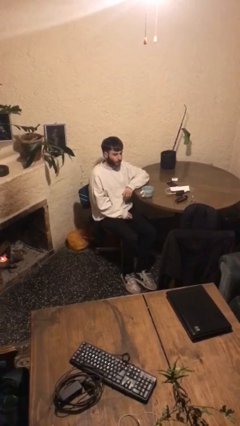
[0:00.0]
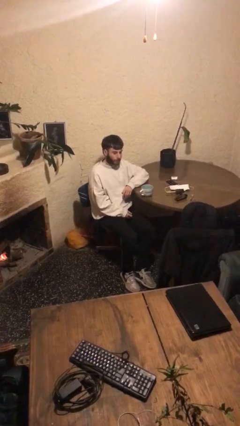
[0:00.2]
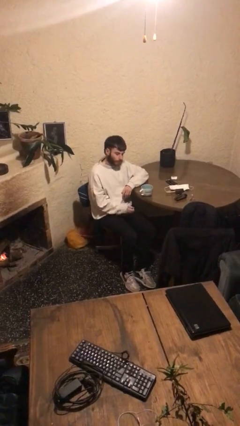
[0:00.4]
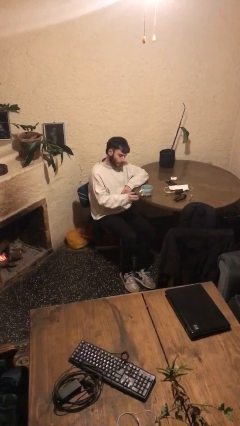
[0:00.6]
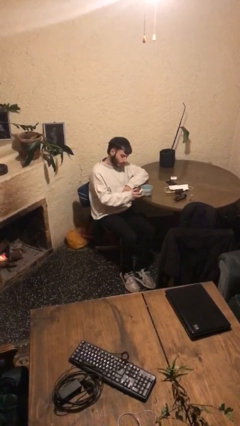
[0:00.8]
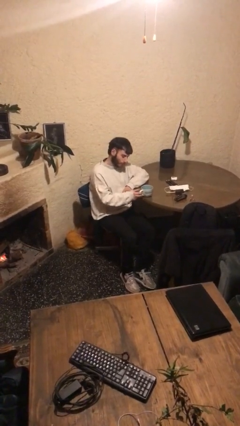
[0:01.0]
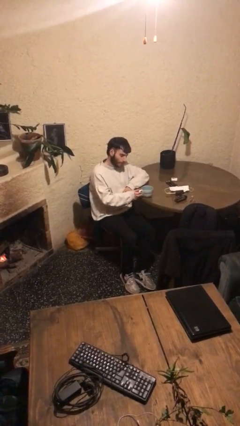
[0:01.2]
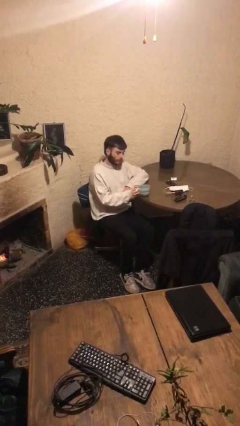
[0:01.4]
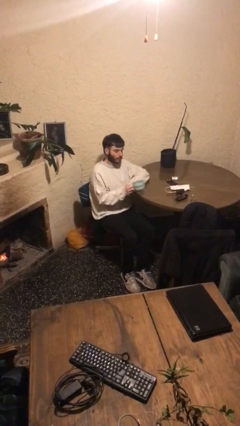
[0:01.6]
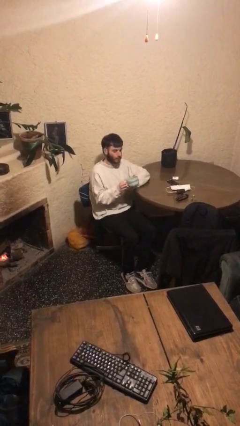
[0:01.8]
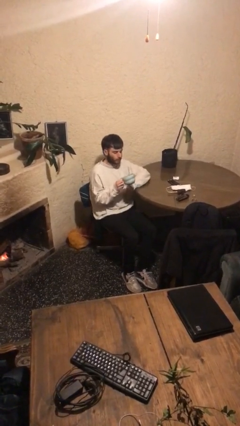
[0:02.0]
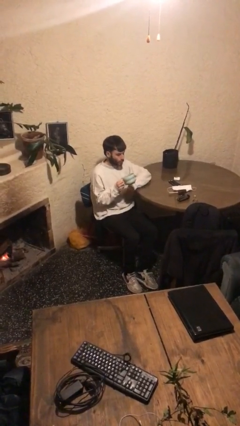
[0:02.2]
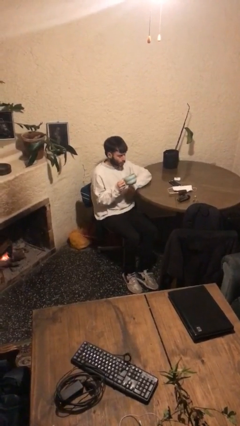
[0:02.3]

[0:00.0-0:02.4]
person picks up object from table

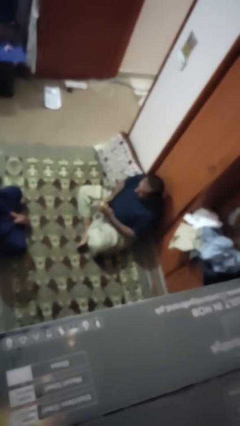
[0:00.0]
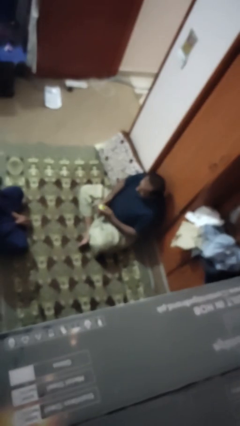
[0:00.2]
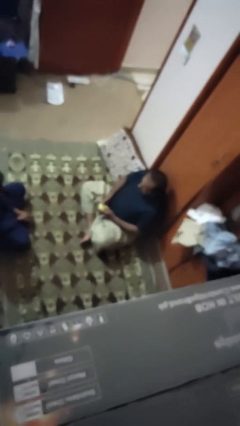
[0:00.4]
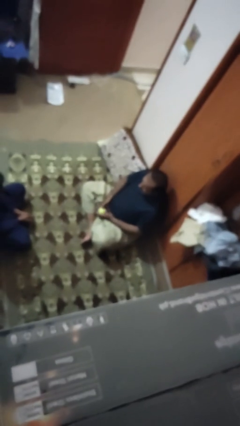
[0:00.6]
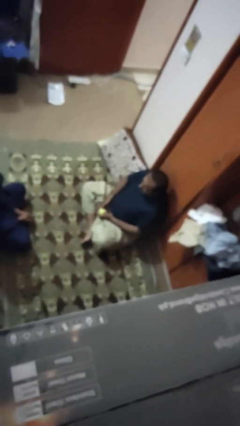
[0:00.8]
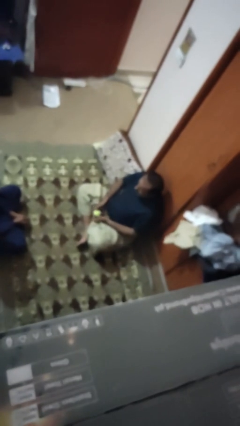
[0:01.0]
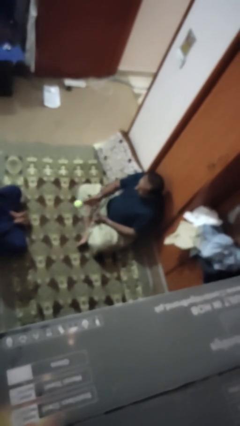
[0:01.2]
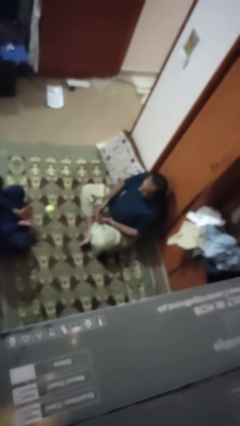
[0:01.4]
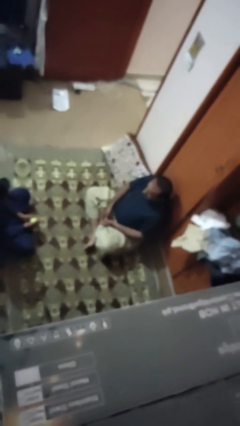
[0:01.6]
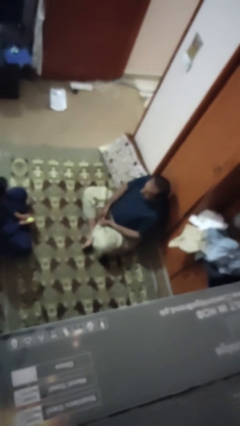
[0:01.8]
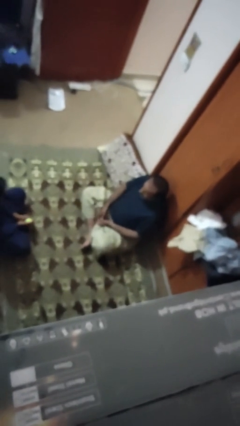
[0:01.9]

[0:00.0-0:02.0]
person throws object to person

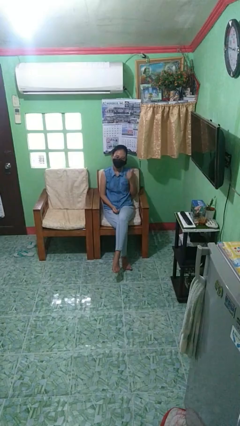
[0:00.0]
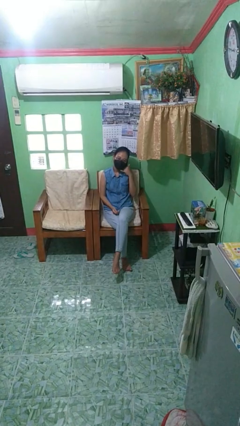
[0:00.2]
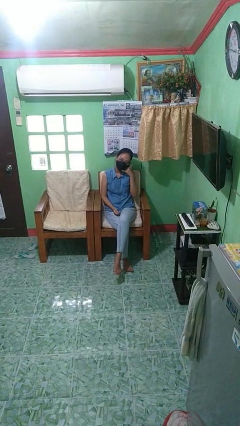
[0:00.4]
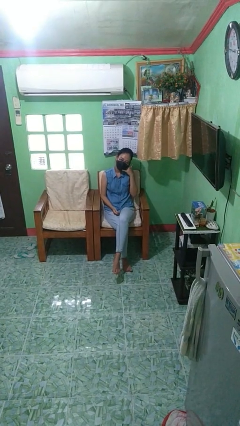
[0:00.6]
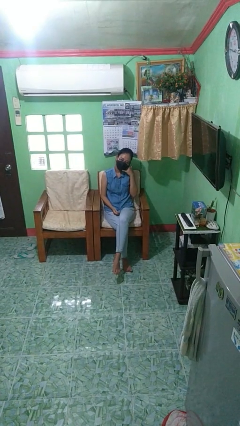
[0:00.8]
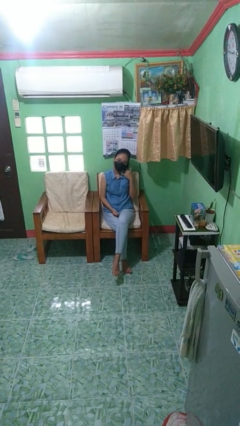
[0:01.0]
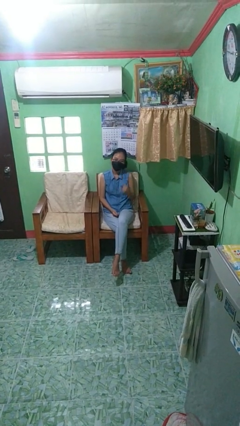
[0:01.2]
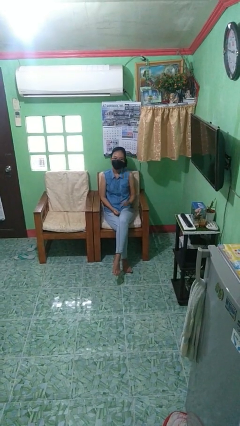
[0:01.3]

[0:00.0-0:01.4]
person gestures call me

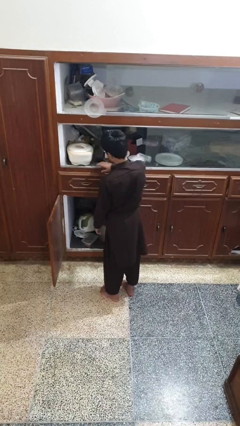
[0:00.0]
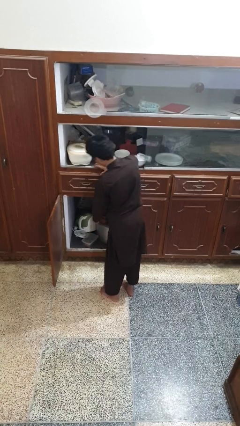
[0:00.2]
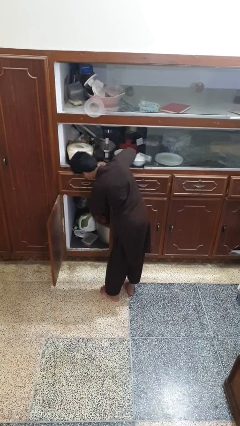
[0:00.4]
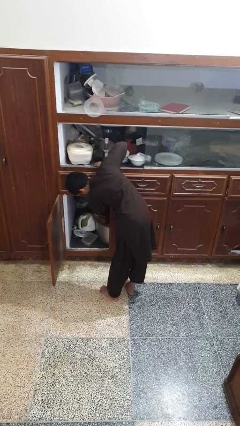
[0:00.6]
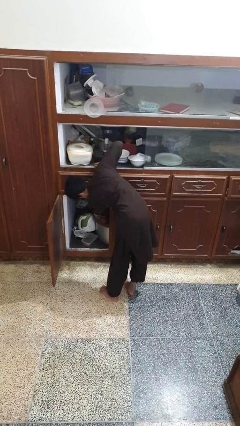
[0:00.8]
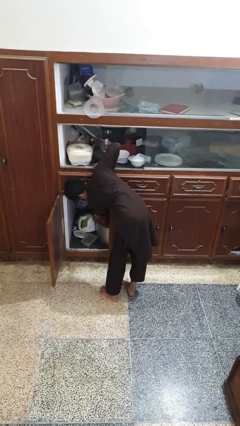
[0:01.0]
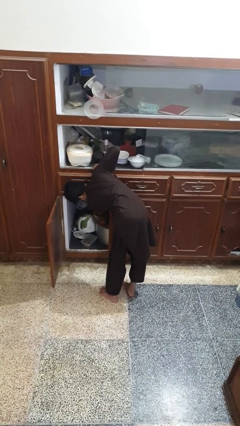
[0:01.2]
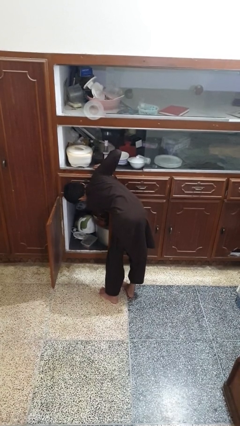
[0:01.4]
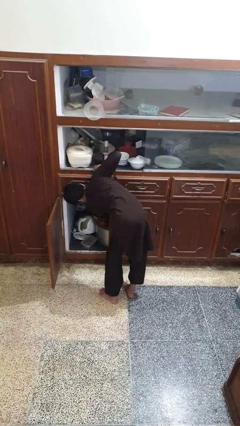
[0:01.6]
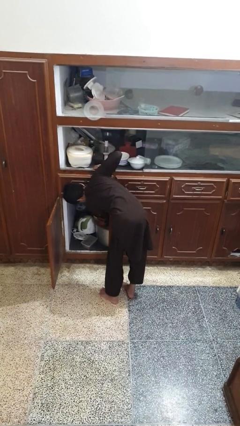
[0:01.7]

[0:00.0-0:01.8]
person takes object from cabinet

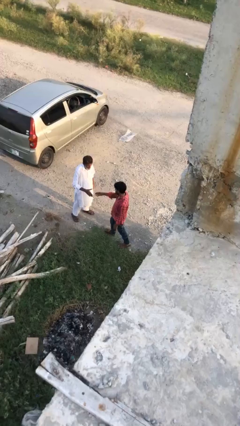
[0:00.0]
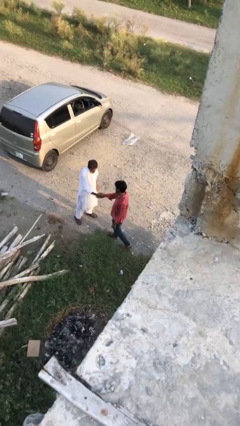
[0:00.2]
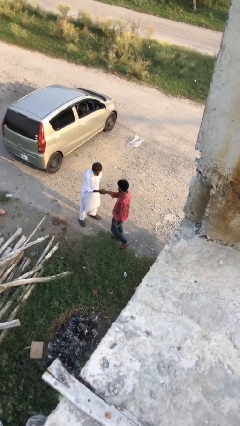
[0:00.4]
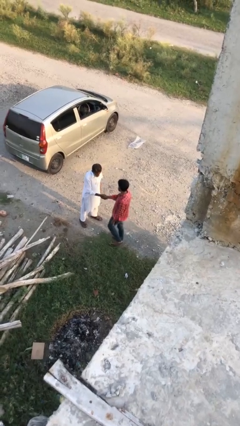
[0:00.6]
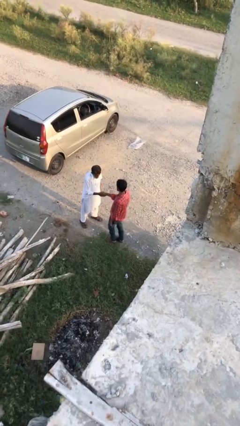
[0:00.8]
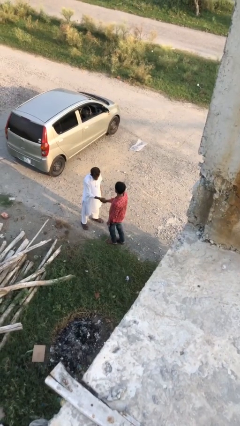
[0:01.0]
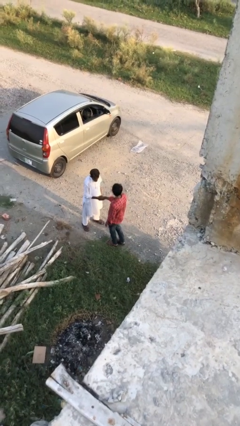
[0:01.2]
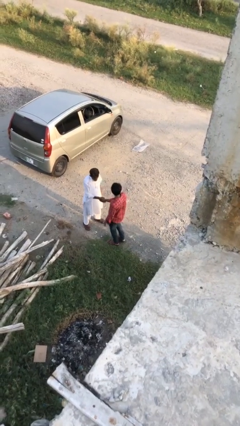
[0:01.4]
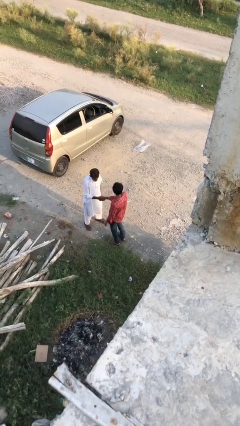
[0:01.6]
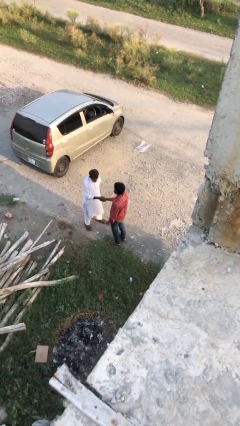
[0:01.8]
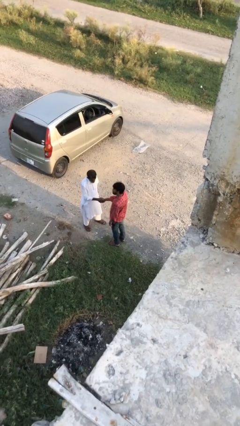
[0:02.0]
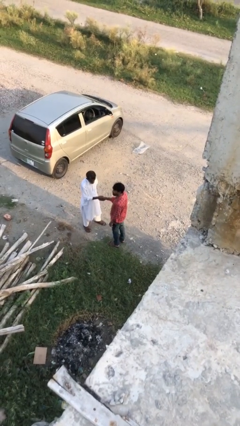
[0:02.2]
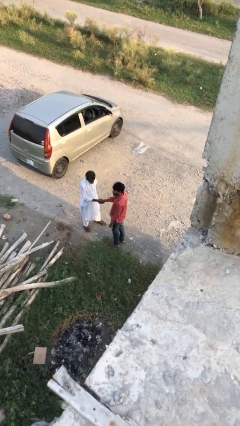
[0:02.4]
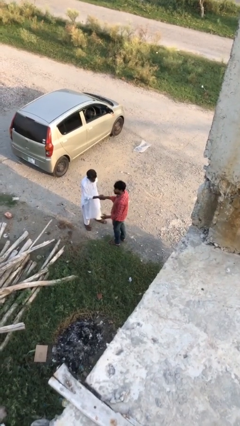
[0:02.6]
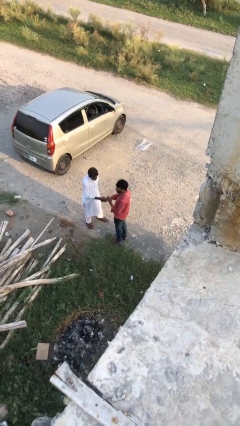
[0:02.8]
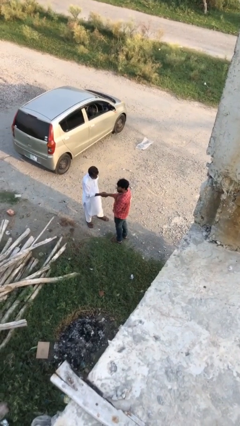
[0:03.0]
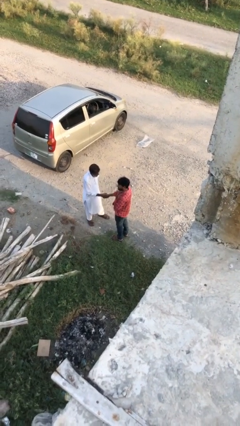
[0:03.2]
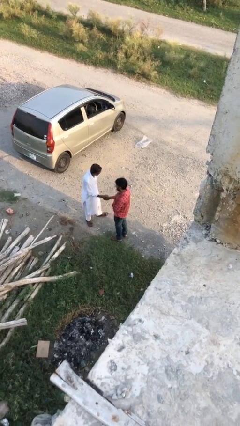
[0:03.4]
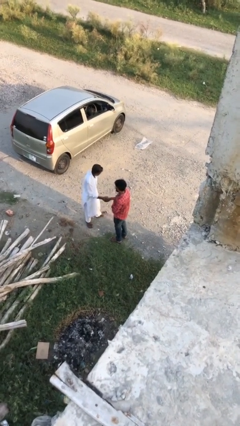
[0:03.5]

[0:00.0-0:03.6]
person shakes hand

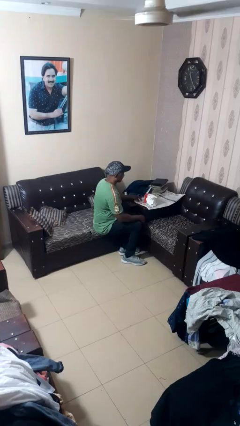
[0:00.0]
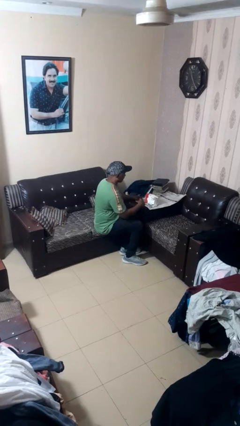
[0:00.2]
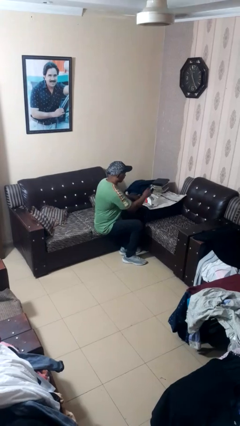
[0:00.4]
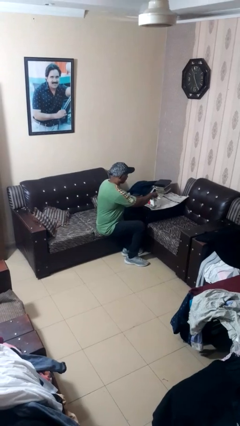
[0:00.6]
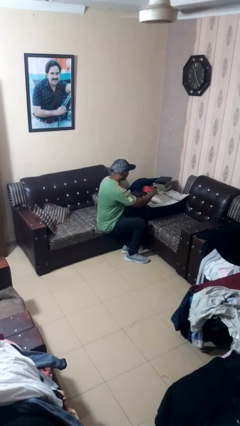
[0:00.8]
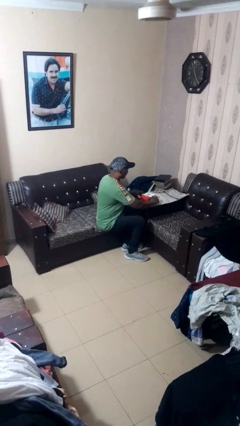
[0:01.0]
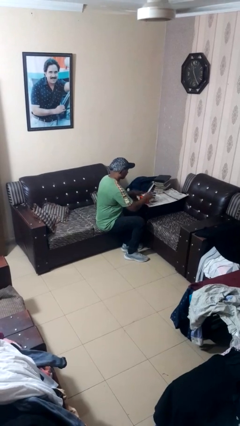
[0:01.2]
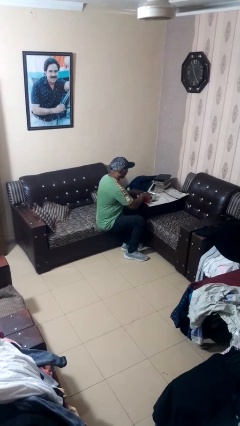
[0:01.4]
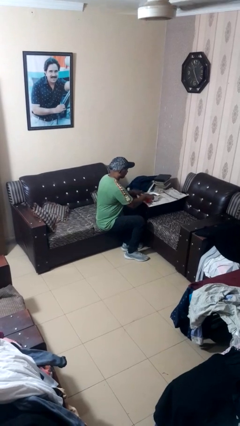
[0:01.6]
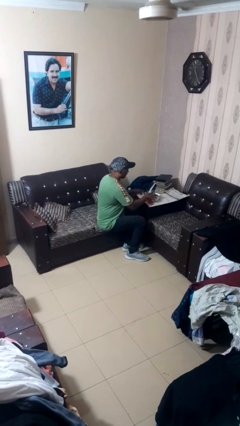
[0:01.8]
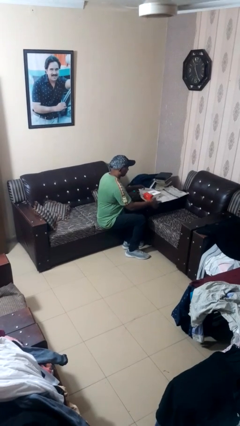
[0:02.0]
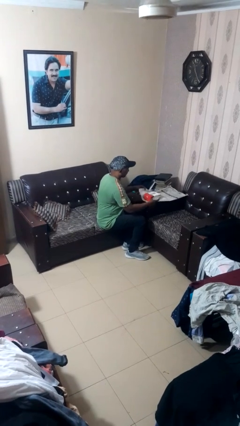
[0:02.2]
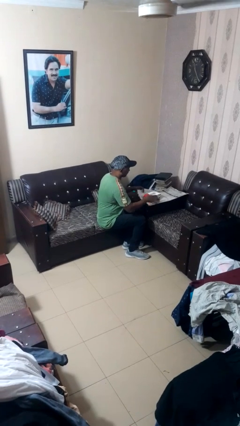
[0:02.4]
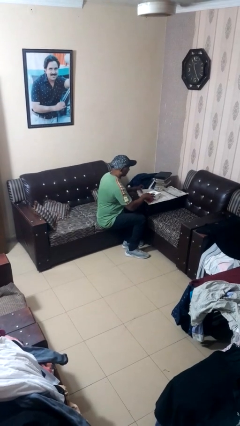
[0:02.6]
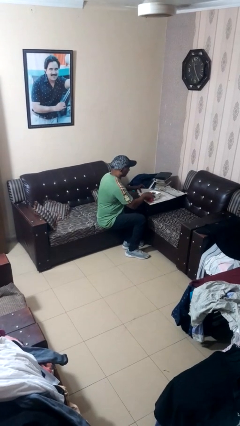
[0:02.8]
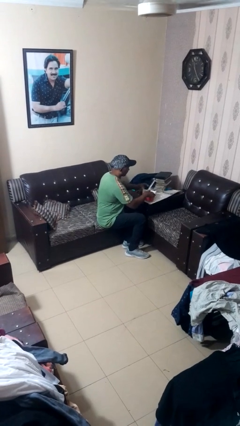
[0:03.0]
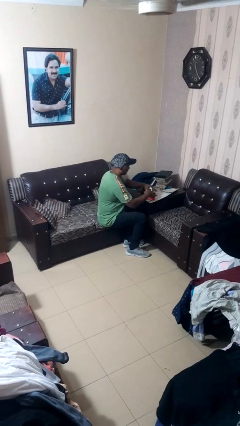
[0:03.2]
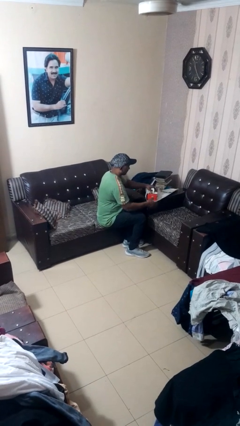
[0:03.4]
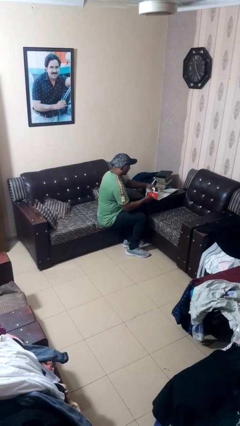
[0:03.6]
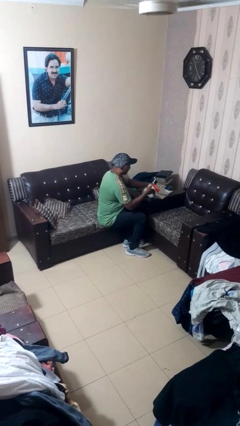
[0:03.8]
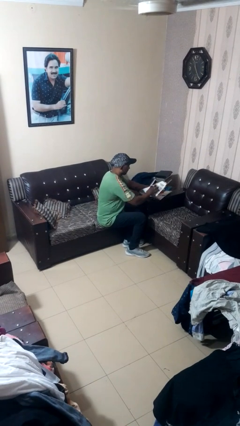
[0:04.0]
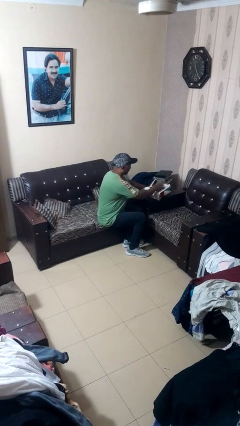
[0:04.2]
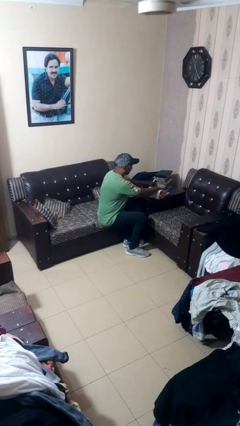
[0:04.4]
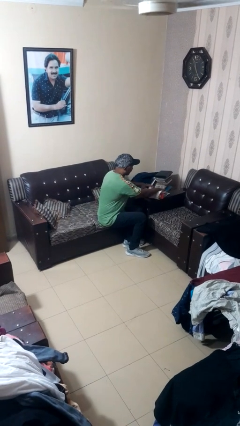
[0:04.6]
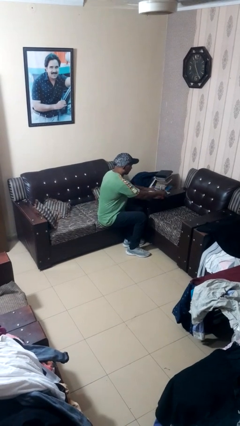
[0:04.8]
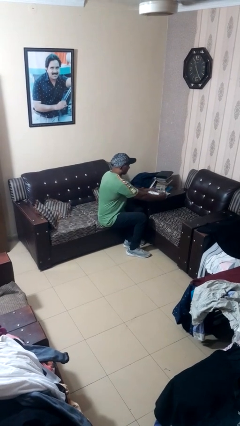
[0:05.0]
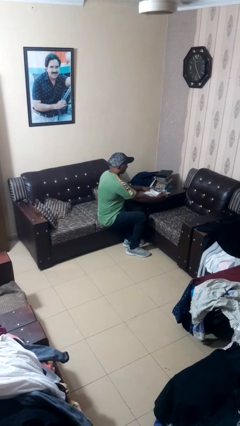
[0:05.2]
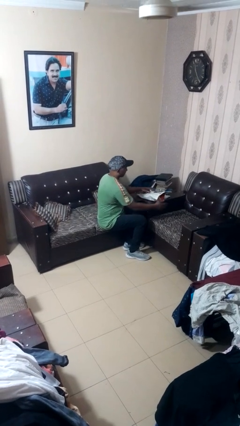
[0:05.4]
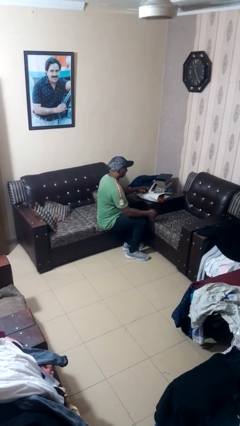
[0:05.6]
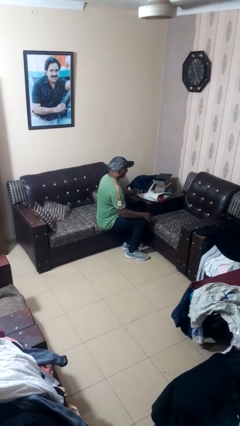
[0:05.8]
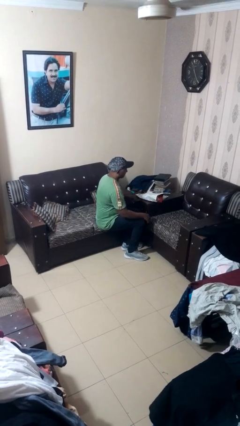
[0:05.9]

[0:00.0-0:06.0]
person wraps box
